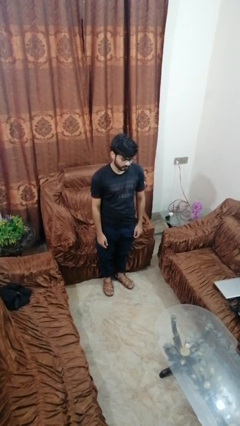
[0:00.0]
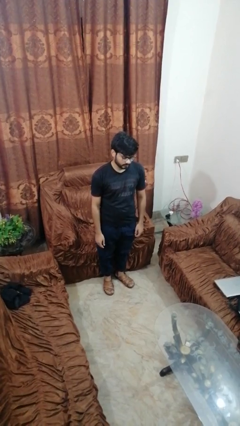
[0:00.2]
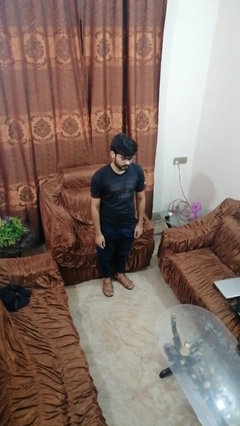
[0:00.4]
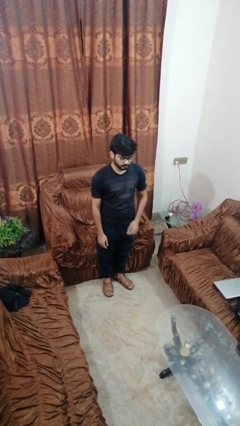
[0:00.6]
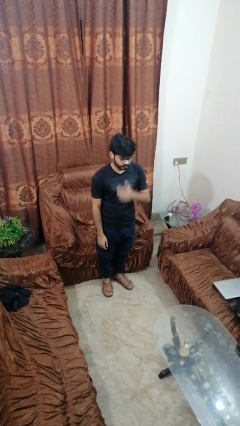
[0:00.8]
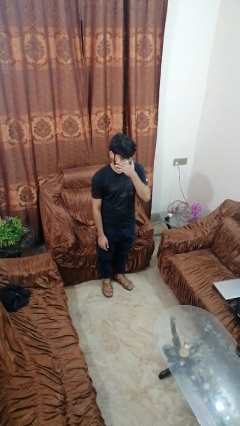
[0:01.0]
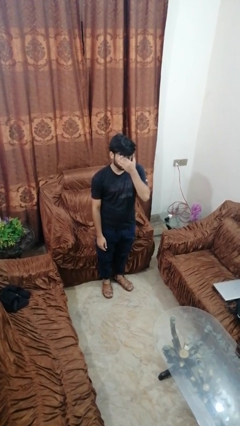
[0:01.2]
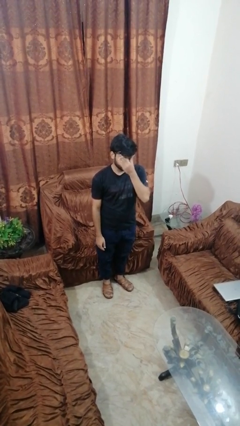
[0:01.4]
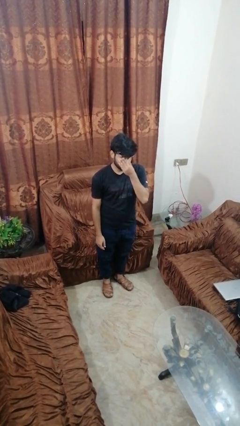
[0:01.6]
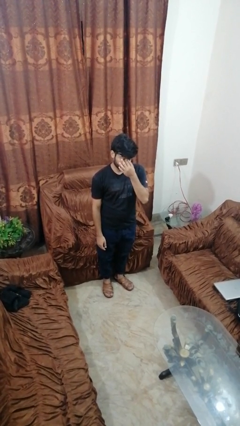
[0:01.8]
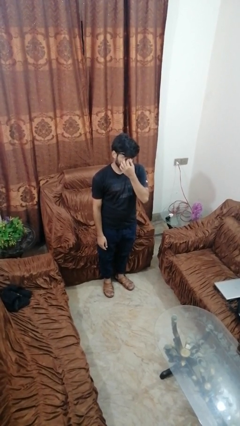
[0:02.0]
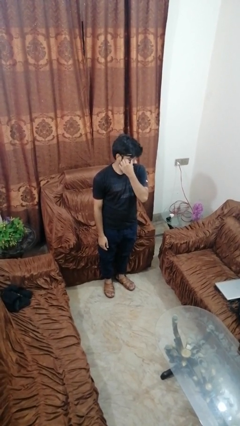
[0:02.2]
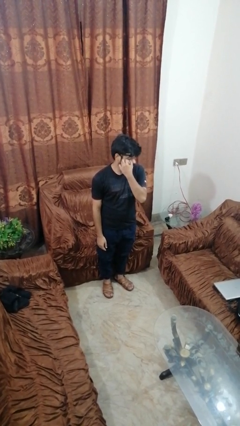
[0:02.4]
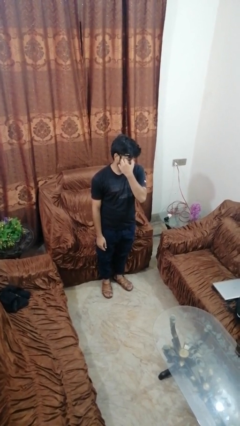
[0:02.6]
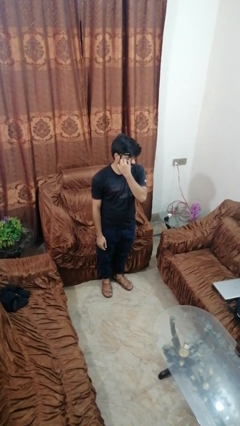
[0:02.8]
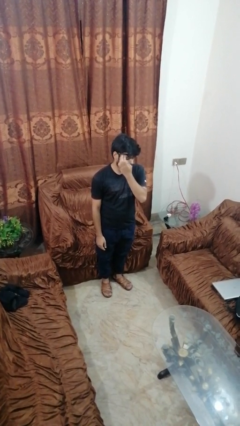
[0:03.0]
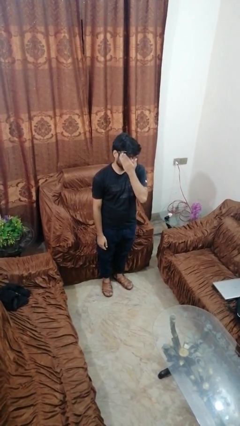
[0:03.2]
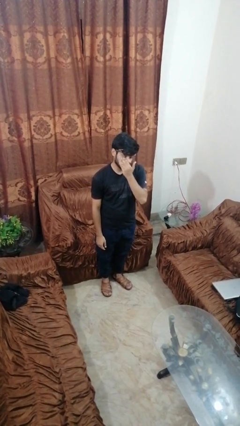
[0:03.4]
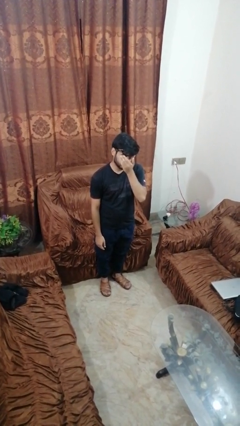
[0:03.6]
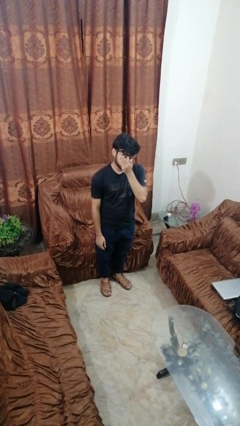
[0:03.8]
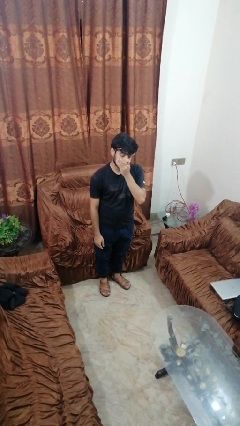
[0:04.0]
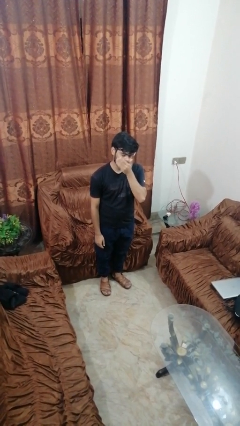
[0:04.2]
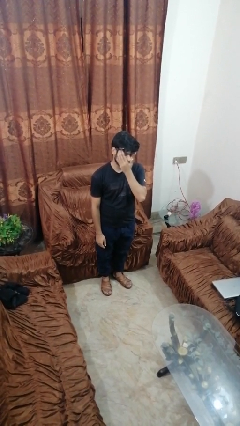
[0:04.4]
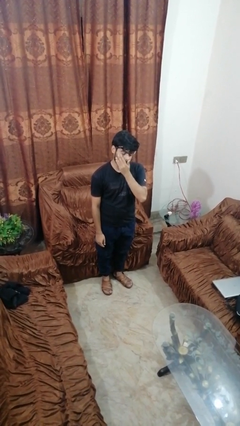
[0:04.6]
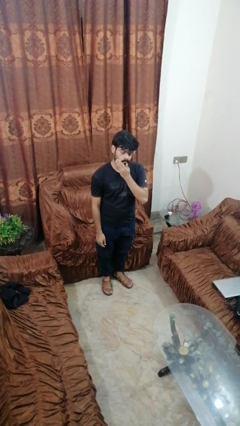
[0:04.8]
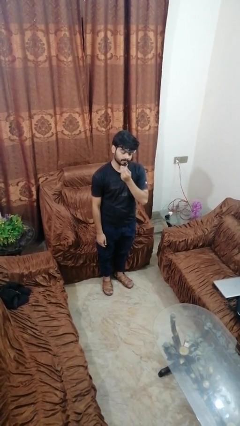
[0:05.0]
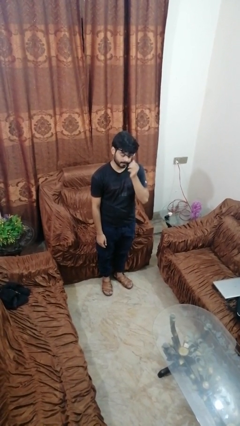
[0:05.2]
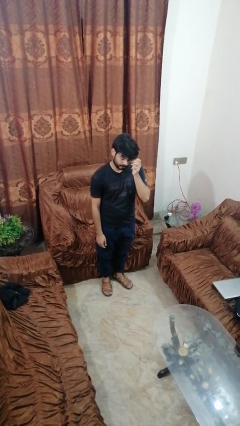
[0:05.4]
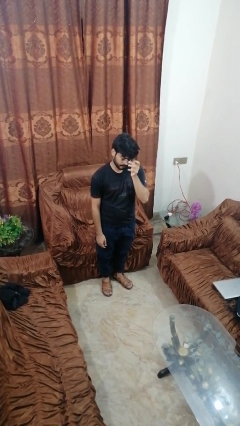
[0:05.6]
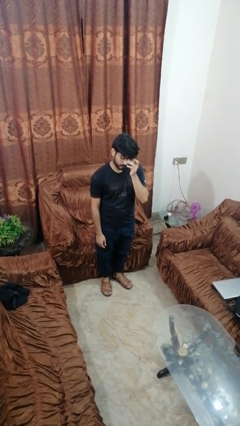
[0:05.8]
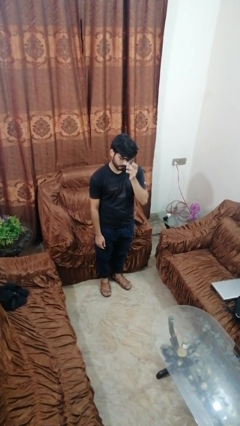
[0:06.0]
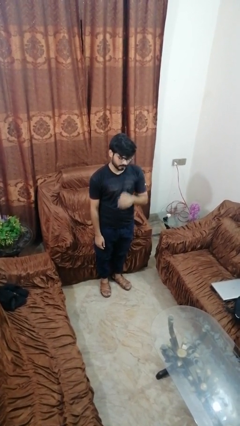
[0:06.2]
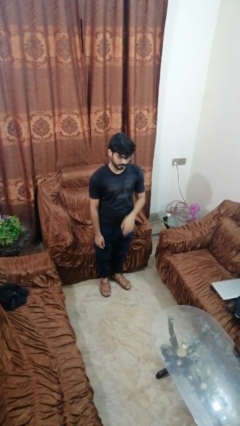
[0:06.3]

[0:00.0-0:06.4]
person scratches face

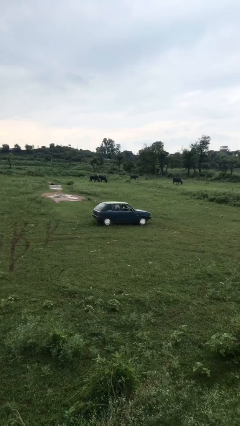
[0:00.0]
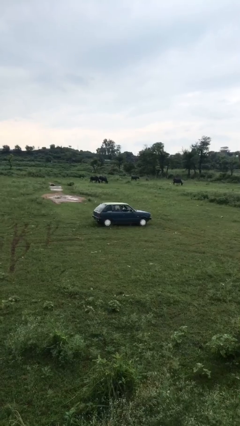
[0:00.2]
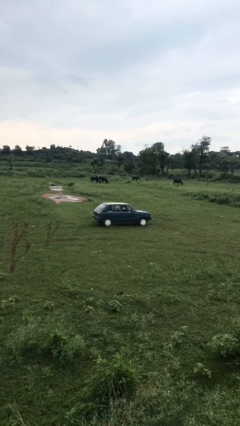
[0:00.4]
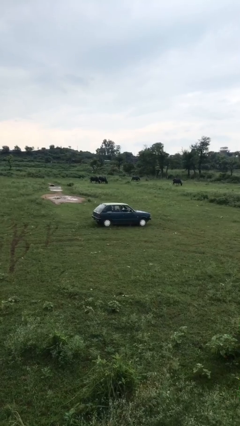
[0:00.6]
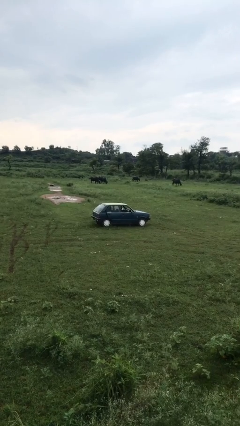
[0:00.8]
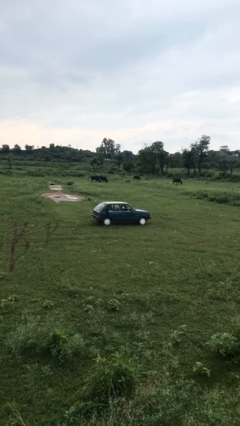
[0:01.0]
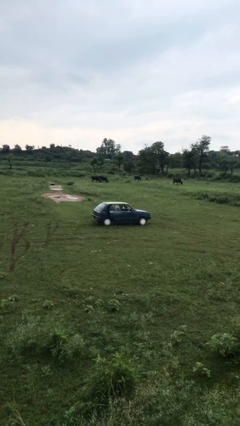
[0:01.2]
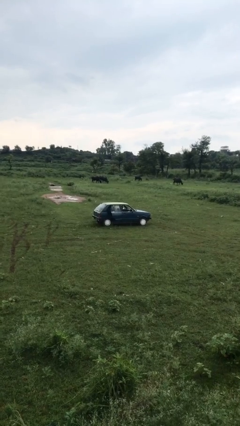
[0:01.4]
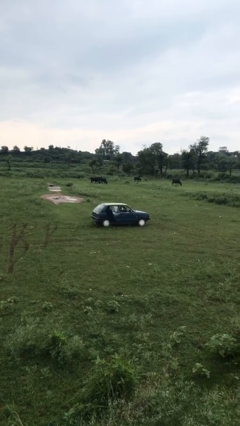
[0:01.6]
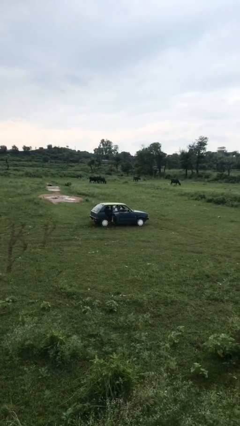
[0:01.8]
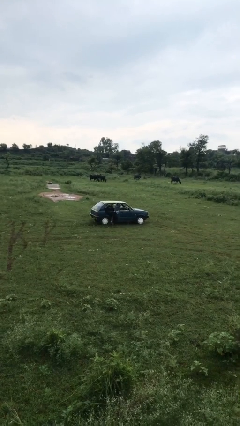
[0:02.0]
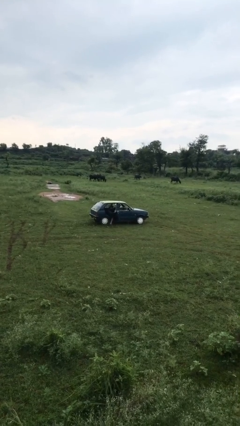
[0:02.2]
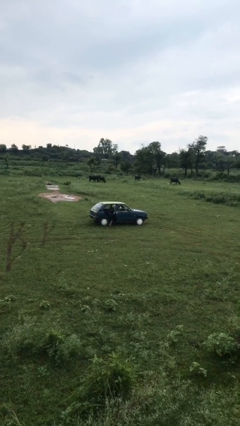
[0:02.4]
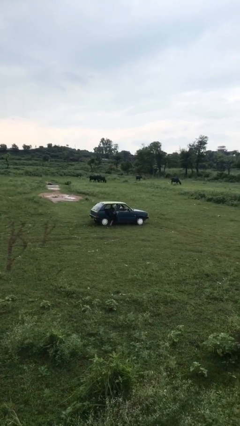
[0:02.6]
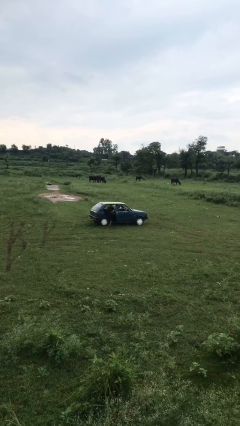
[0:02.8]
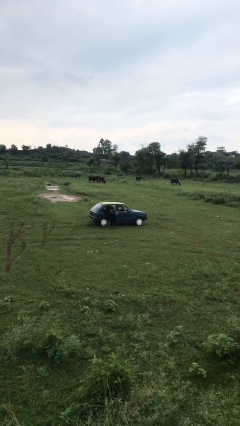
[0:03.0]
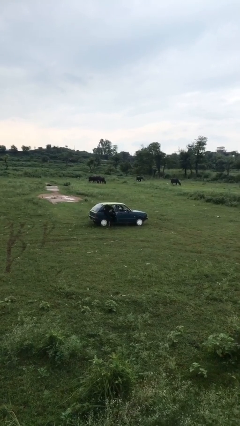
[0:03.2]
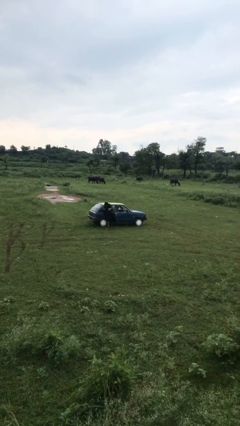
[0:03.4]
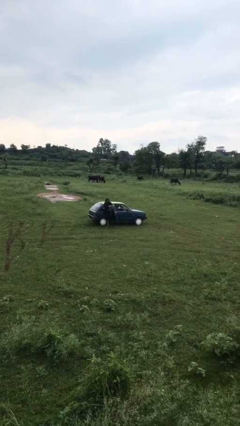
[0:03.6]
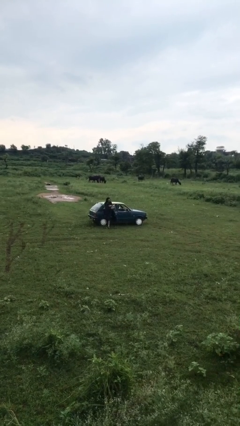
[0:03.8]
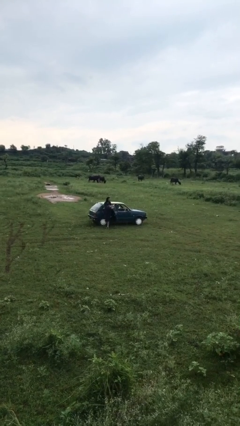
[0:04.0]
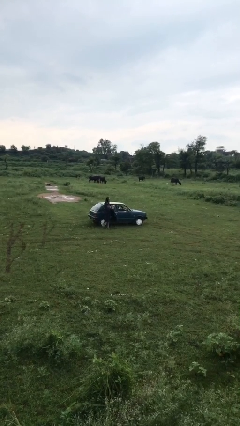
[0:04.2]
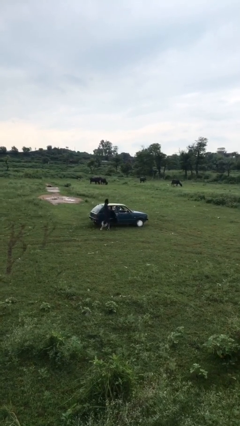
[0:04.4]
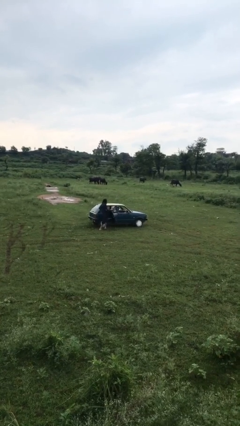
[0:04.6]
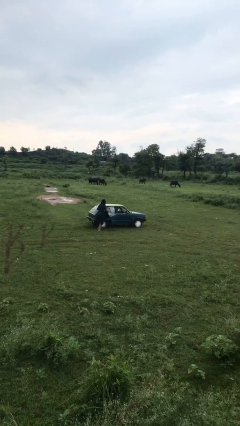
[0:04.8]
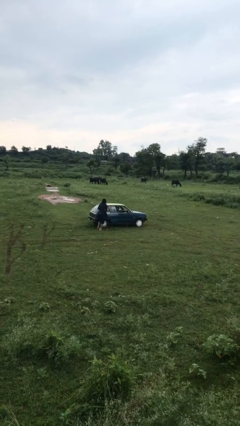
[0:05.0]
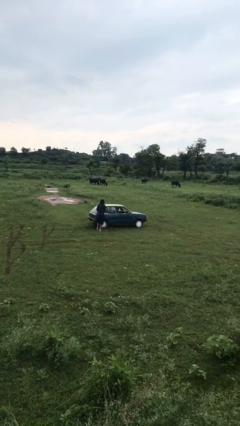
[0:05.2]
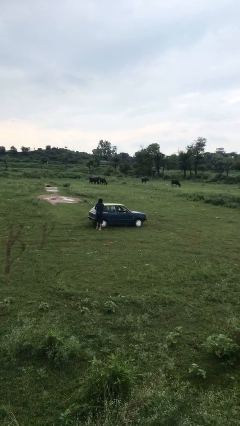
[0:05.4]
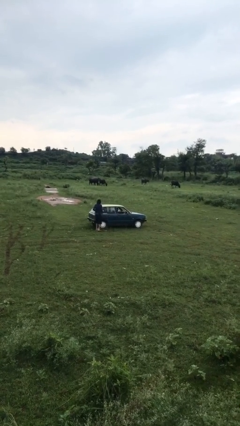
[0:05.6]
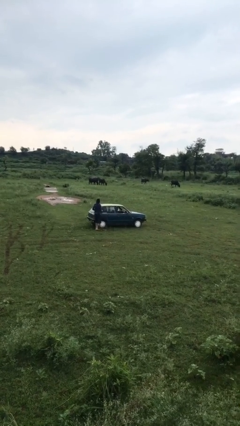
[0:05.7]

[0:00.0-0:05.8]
car drops off person

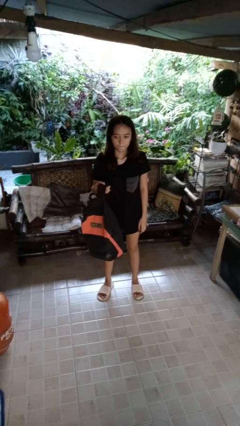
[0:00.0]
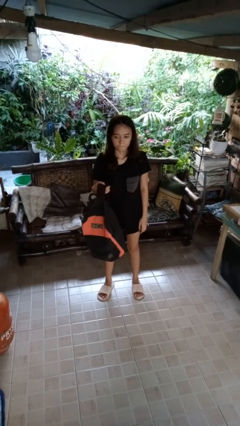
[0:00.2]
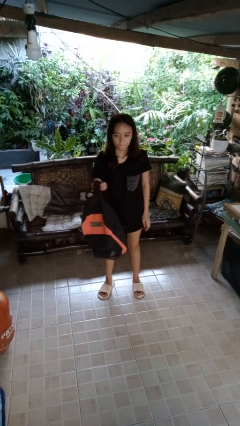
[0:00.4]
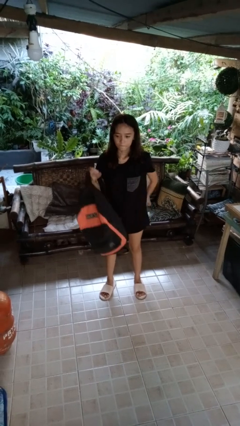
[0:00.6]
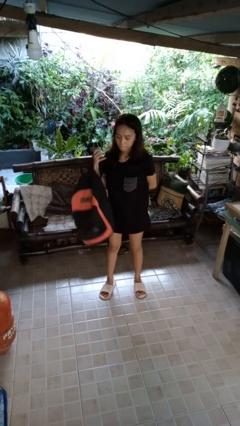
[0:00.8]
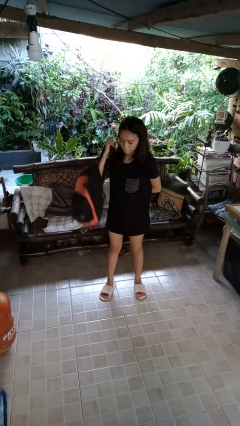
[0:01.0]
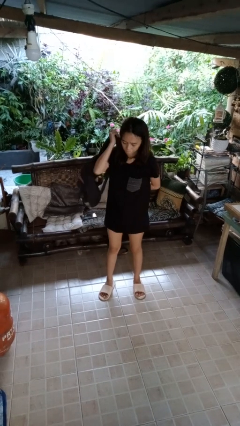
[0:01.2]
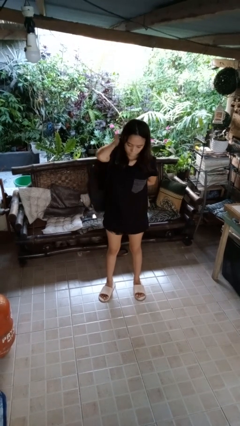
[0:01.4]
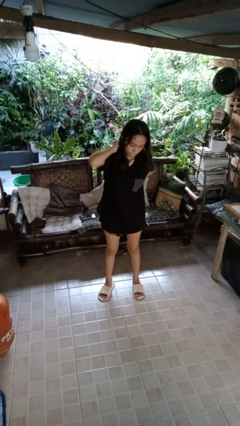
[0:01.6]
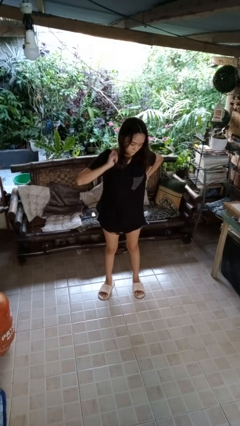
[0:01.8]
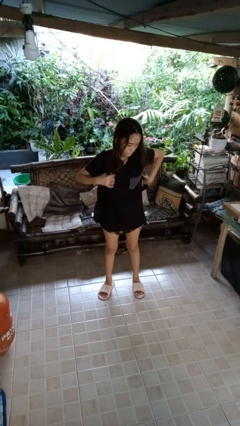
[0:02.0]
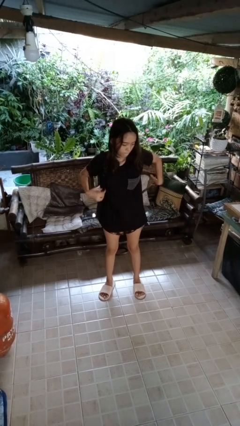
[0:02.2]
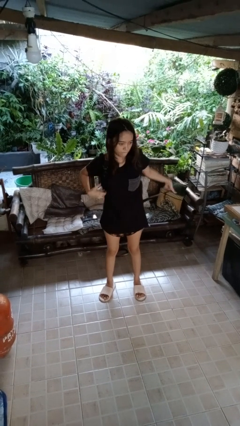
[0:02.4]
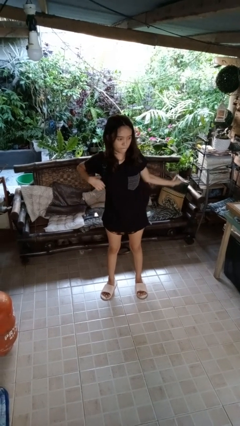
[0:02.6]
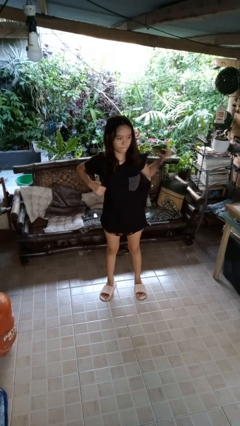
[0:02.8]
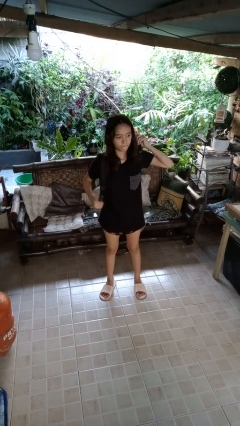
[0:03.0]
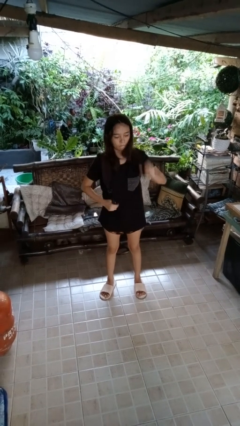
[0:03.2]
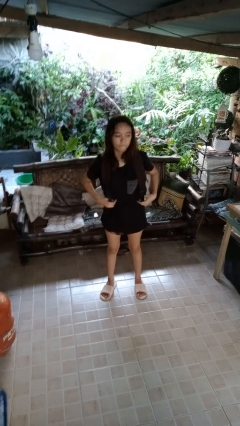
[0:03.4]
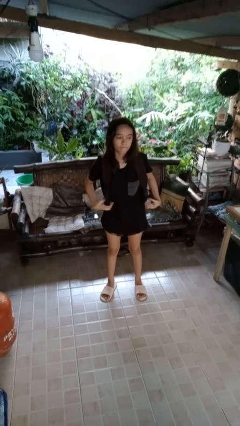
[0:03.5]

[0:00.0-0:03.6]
person puts on backpack

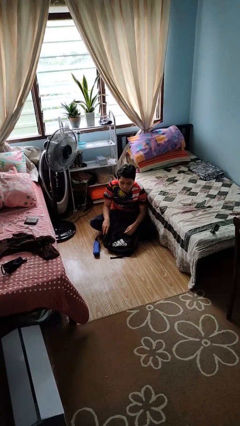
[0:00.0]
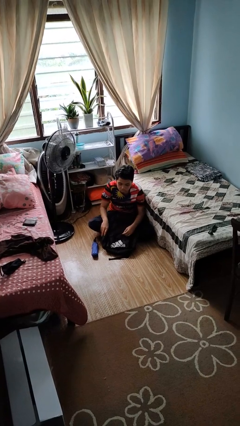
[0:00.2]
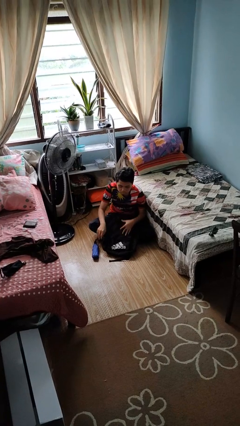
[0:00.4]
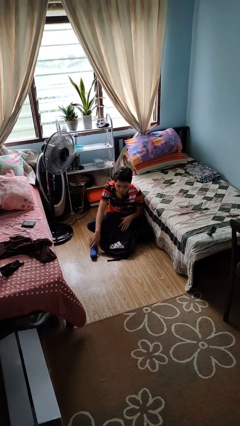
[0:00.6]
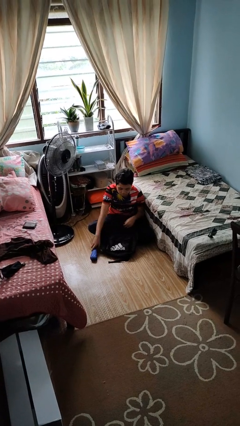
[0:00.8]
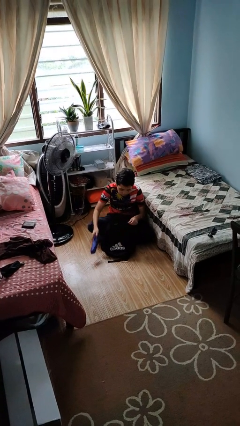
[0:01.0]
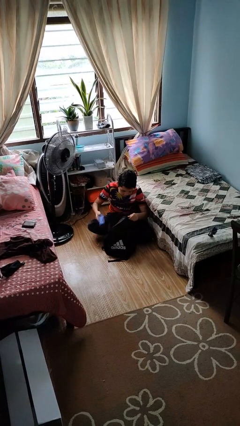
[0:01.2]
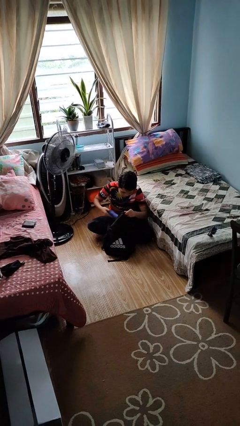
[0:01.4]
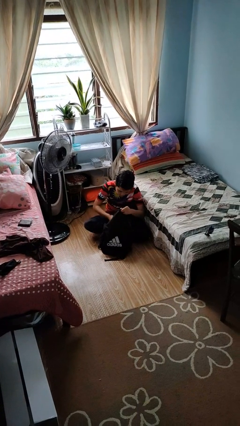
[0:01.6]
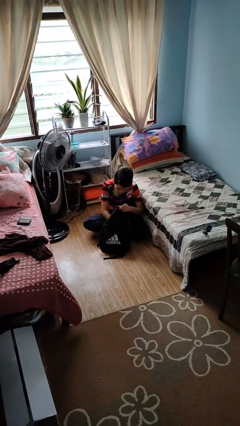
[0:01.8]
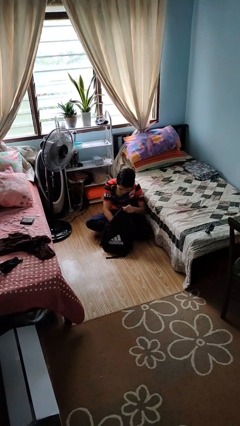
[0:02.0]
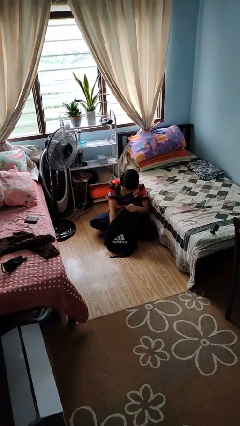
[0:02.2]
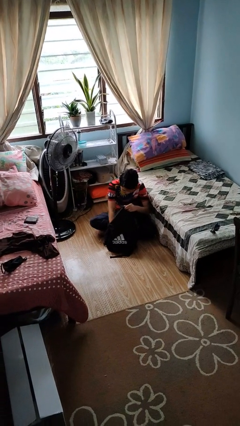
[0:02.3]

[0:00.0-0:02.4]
person puts object into backpack
